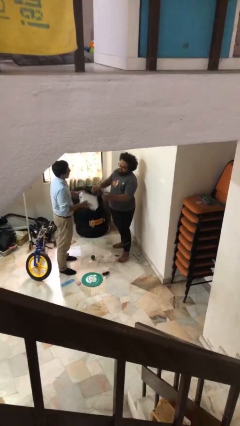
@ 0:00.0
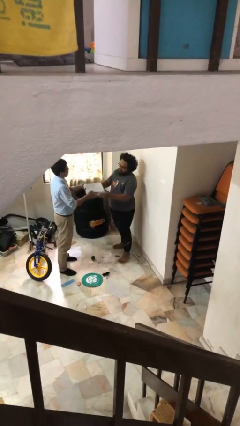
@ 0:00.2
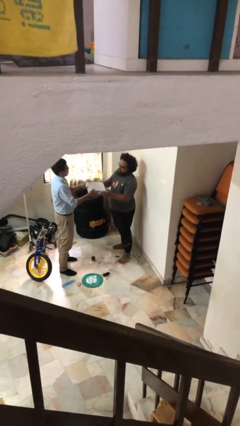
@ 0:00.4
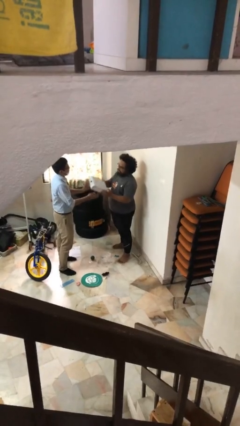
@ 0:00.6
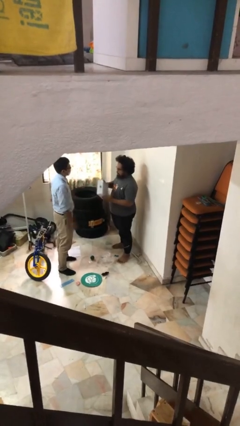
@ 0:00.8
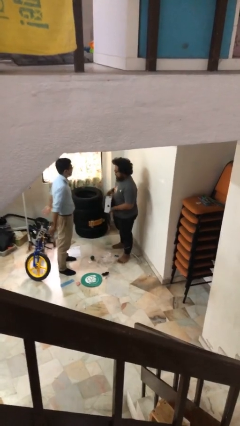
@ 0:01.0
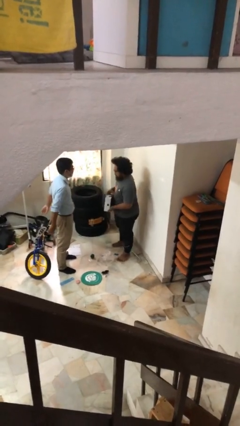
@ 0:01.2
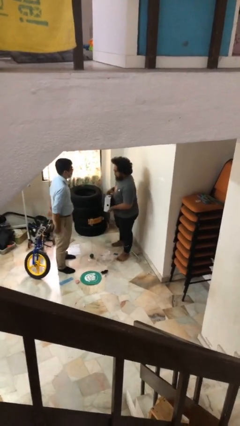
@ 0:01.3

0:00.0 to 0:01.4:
person transfers object to person

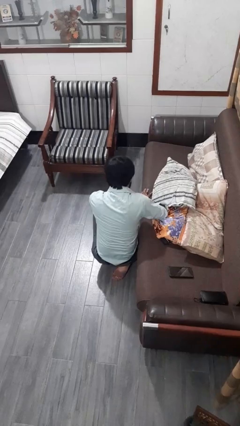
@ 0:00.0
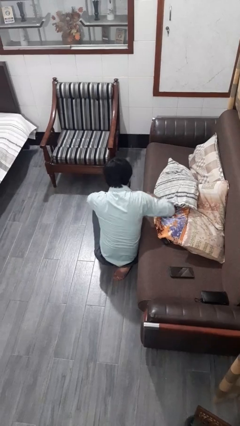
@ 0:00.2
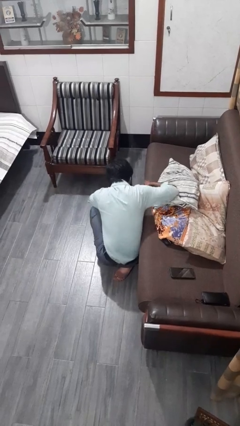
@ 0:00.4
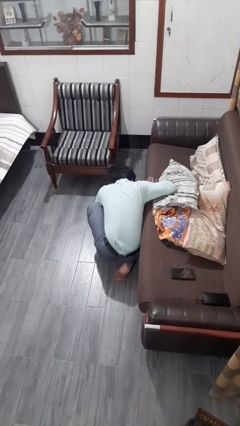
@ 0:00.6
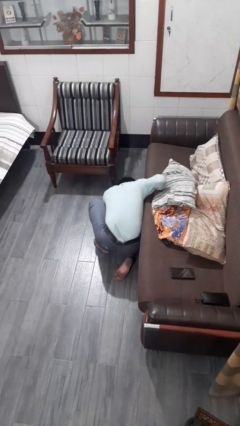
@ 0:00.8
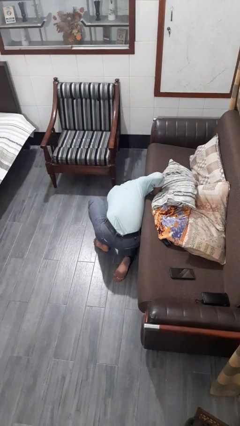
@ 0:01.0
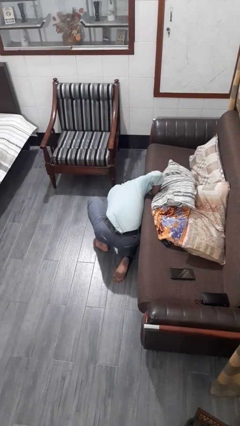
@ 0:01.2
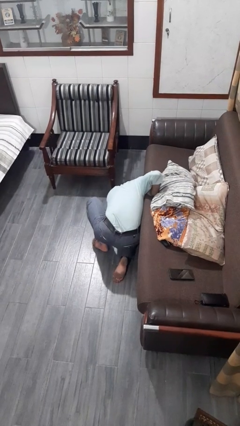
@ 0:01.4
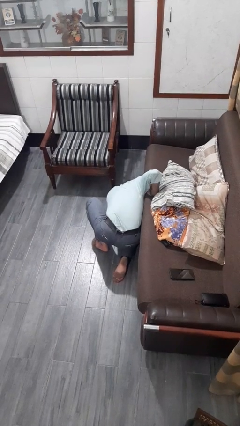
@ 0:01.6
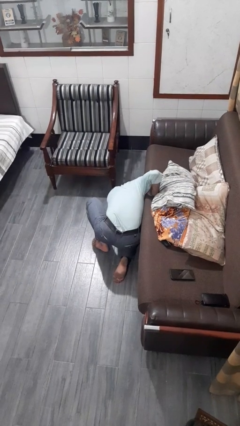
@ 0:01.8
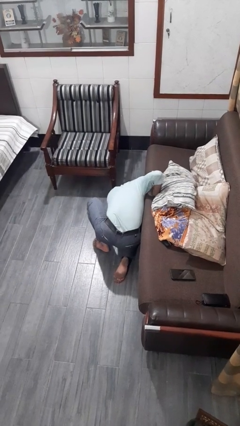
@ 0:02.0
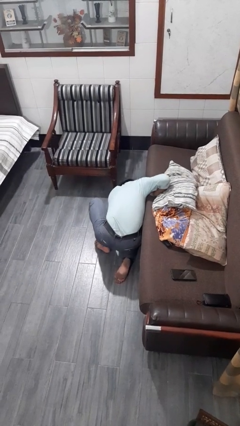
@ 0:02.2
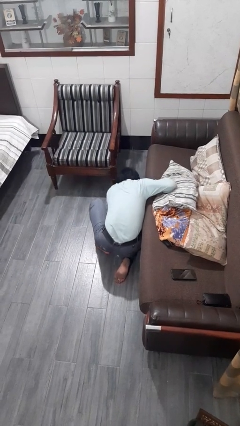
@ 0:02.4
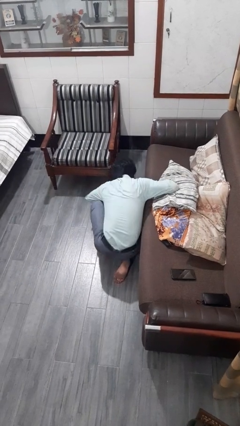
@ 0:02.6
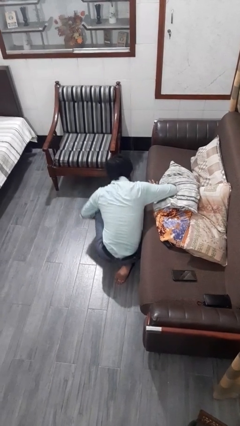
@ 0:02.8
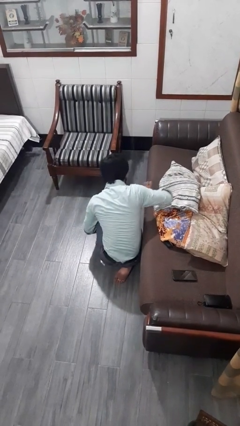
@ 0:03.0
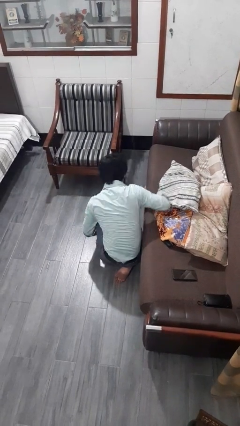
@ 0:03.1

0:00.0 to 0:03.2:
person searches under couch

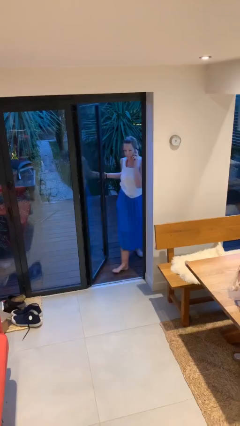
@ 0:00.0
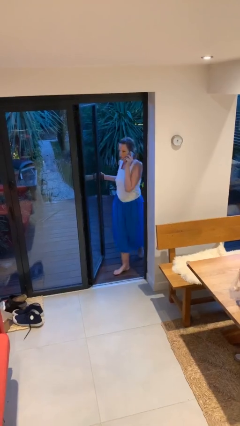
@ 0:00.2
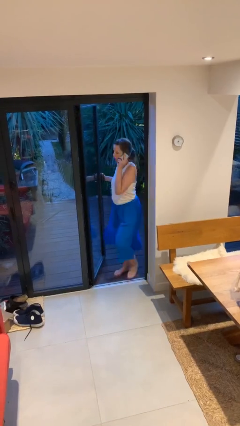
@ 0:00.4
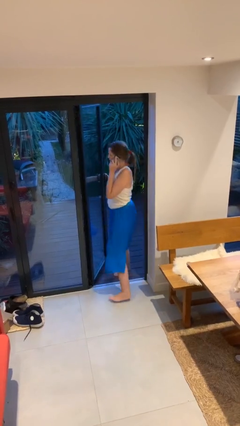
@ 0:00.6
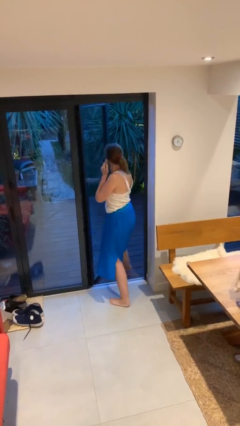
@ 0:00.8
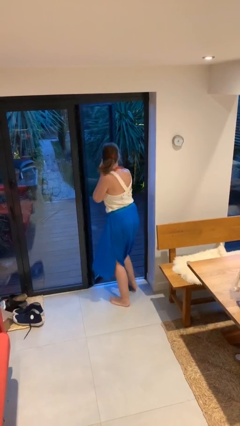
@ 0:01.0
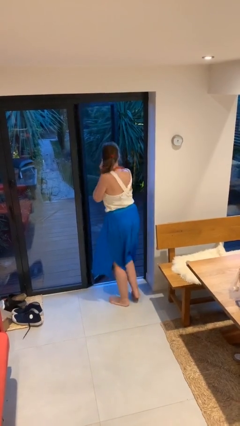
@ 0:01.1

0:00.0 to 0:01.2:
person enters scene through structure

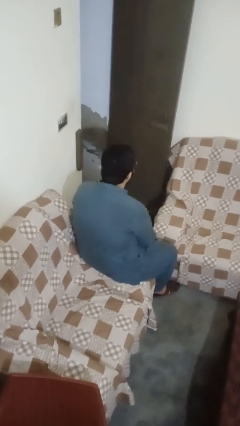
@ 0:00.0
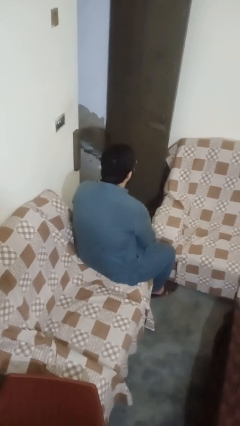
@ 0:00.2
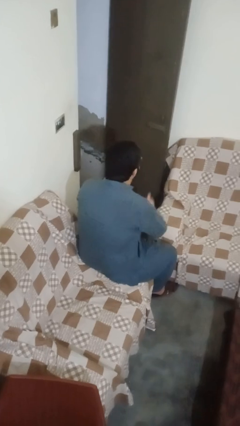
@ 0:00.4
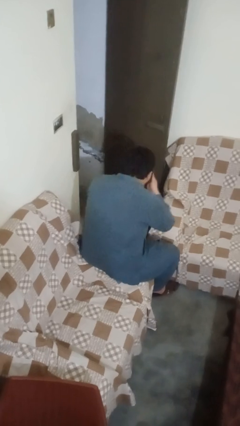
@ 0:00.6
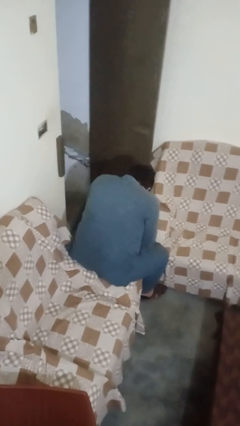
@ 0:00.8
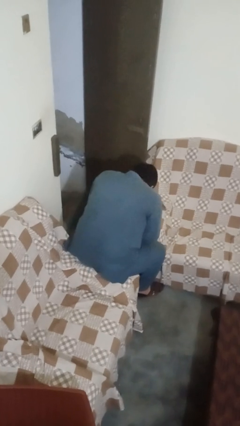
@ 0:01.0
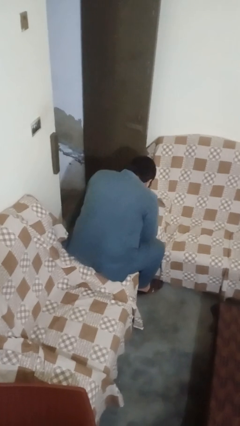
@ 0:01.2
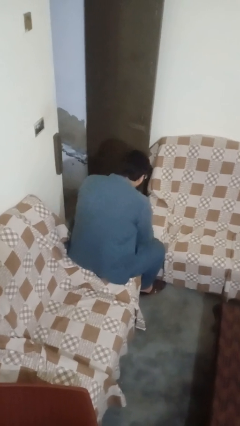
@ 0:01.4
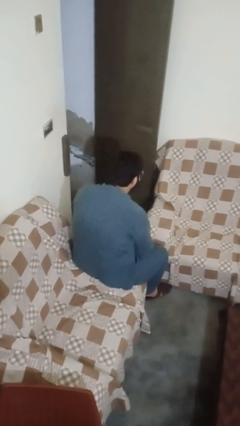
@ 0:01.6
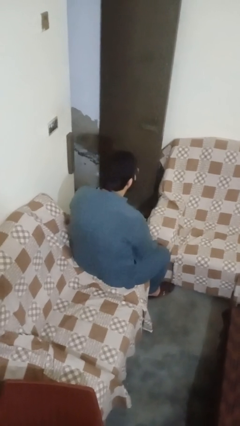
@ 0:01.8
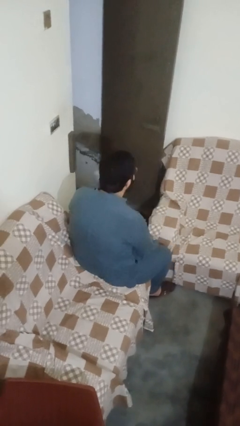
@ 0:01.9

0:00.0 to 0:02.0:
person sneezes into hand

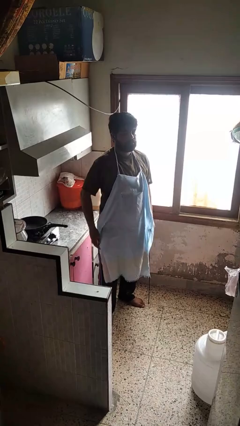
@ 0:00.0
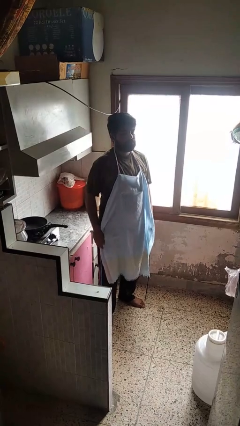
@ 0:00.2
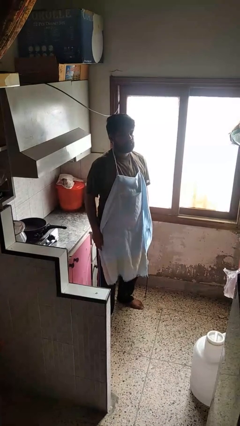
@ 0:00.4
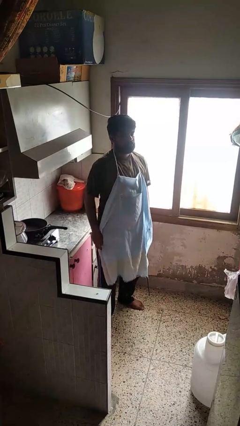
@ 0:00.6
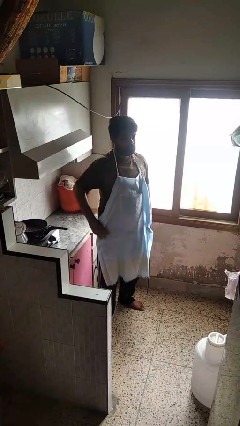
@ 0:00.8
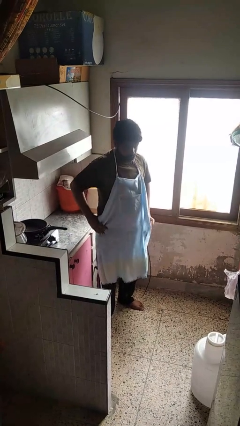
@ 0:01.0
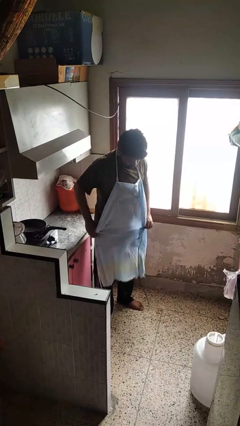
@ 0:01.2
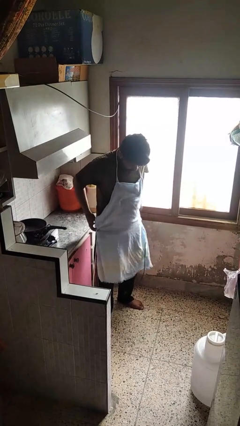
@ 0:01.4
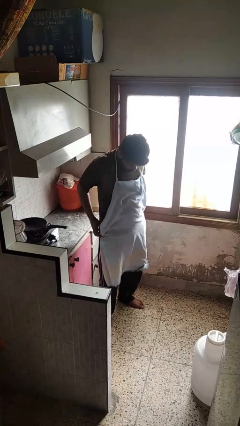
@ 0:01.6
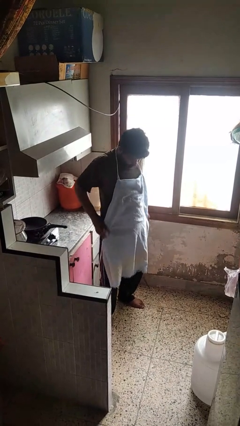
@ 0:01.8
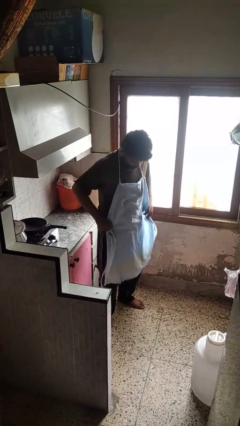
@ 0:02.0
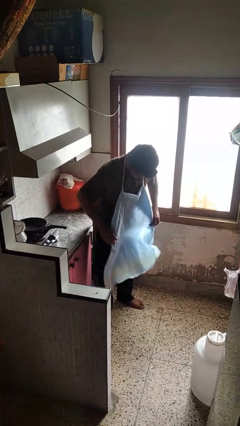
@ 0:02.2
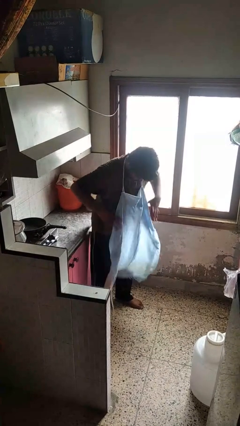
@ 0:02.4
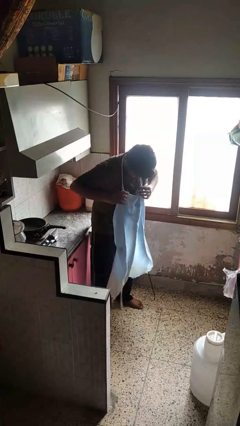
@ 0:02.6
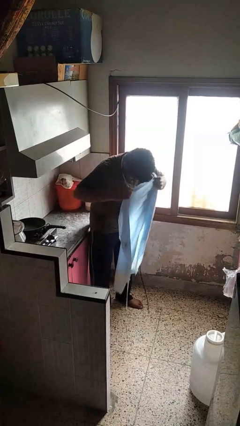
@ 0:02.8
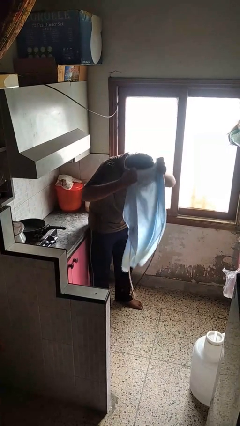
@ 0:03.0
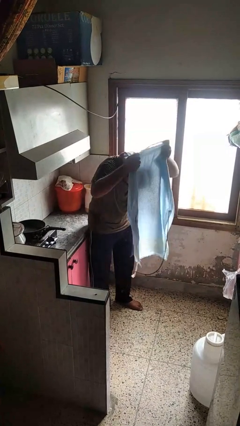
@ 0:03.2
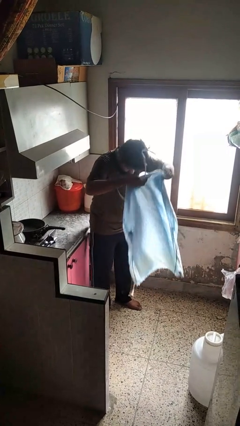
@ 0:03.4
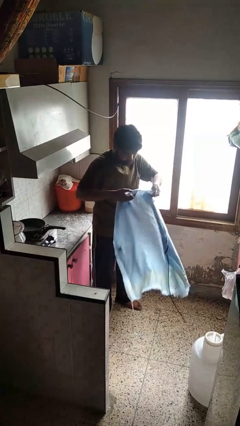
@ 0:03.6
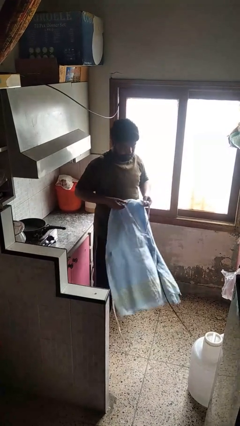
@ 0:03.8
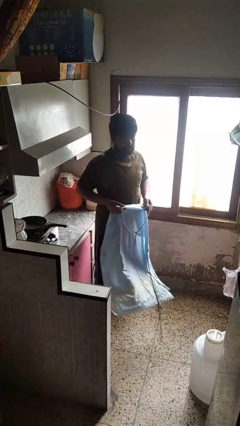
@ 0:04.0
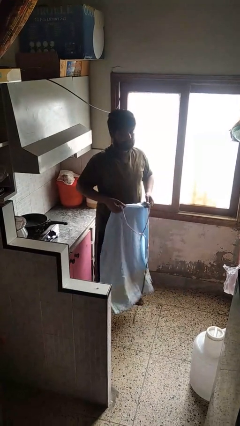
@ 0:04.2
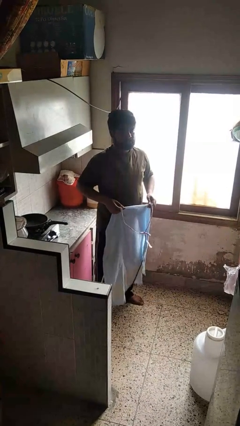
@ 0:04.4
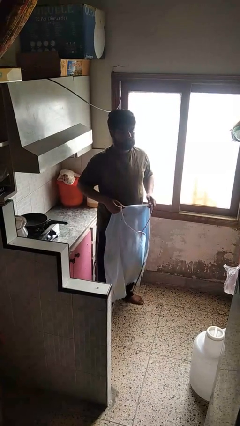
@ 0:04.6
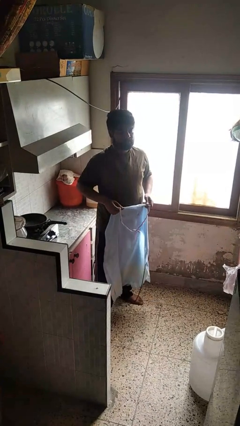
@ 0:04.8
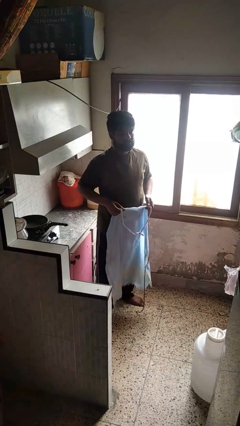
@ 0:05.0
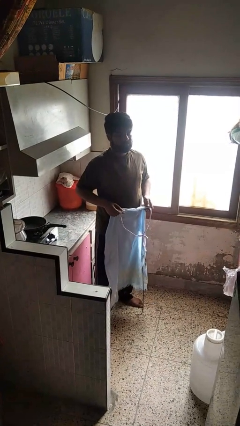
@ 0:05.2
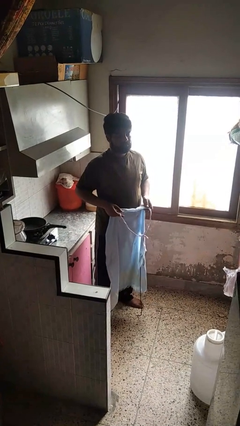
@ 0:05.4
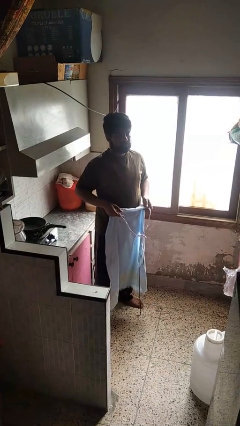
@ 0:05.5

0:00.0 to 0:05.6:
person takes off apron

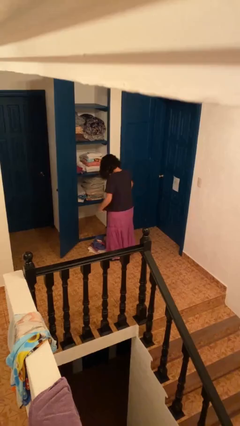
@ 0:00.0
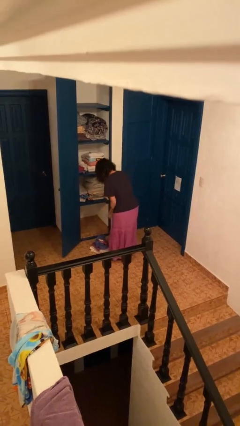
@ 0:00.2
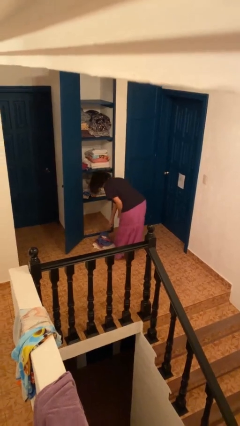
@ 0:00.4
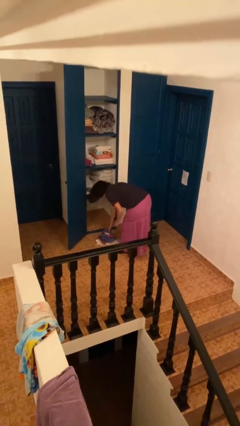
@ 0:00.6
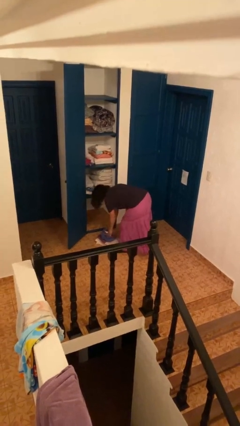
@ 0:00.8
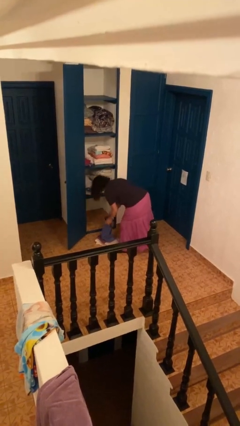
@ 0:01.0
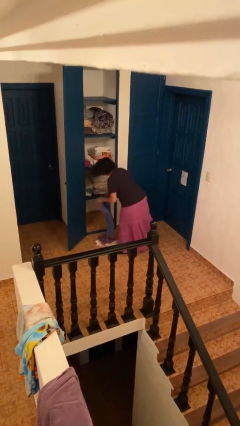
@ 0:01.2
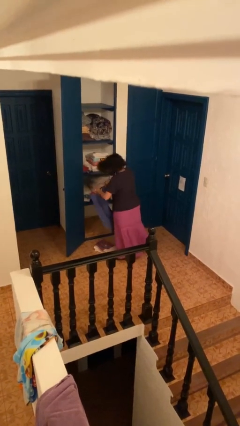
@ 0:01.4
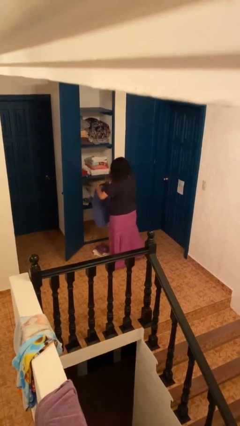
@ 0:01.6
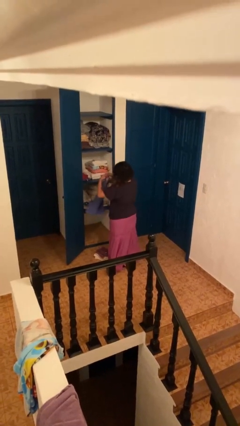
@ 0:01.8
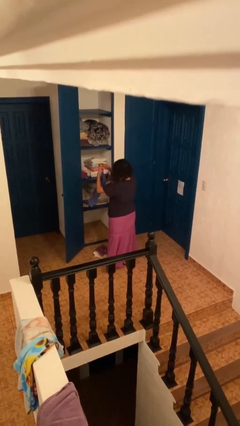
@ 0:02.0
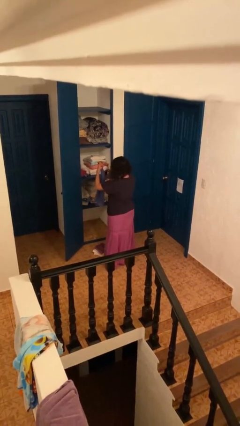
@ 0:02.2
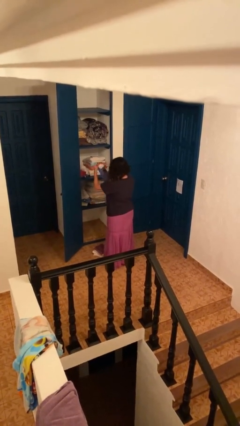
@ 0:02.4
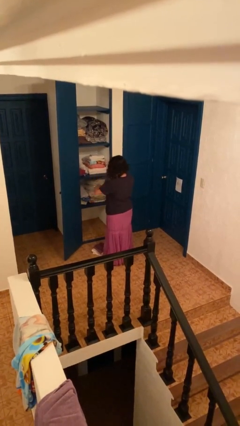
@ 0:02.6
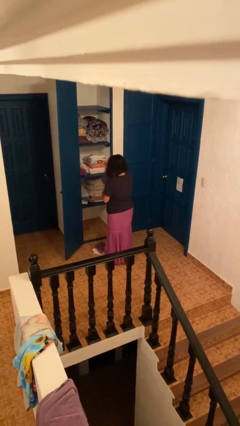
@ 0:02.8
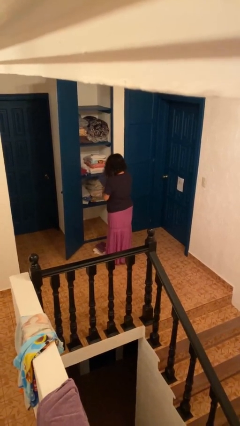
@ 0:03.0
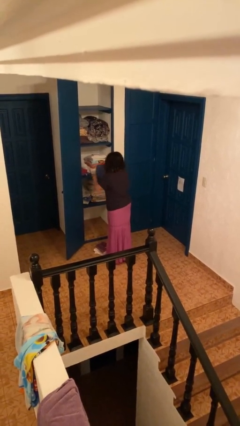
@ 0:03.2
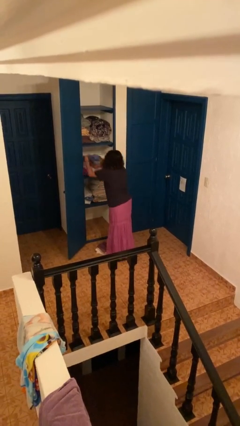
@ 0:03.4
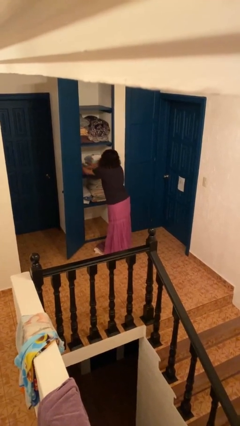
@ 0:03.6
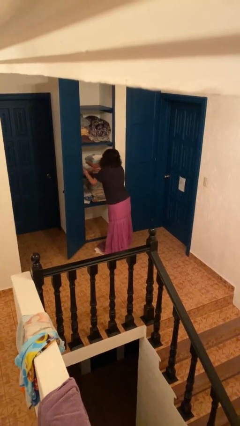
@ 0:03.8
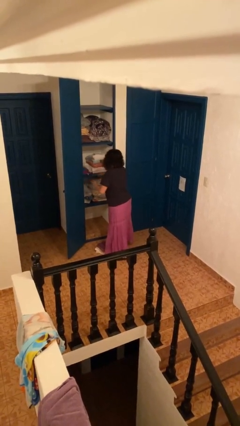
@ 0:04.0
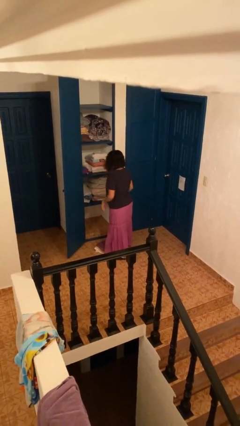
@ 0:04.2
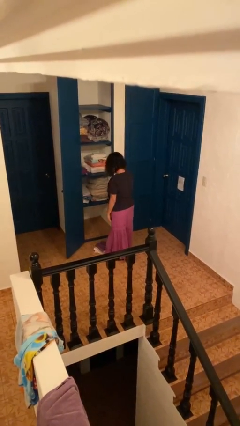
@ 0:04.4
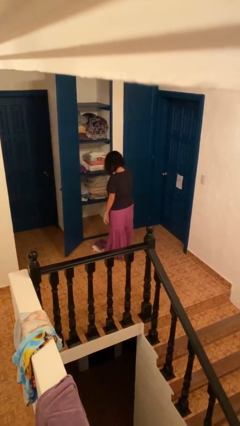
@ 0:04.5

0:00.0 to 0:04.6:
person folds towel
